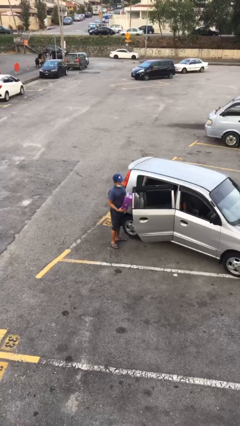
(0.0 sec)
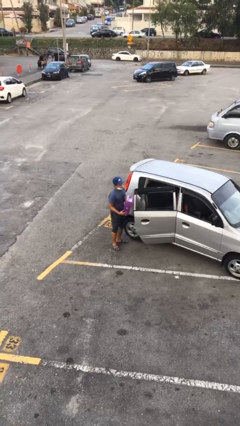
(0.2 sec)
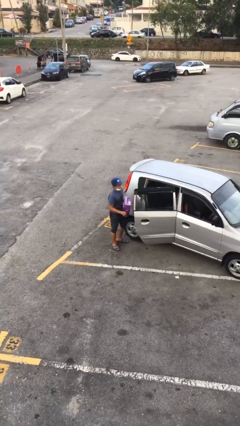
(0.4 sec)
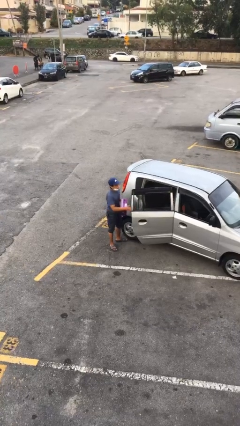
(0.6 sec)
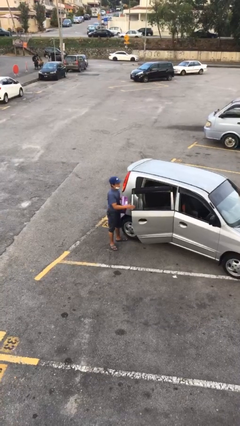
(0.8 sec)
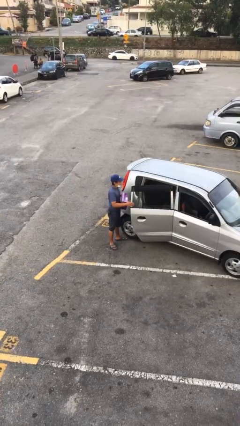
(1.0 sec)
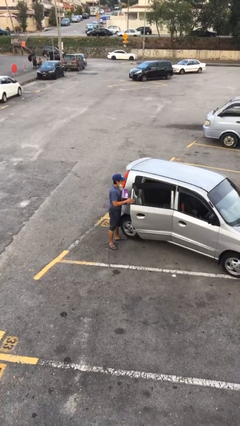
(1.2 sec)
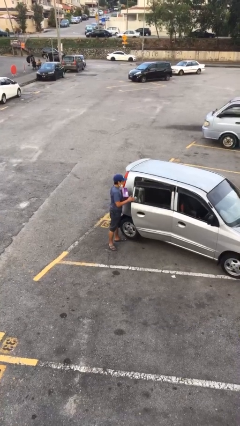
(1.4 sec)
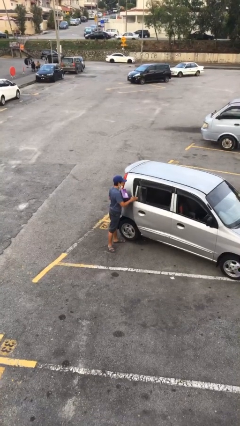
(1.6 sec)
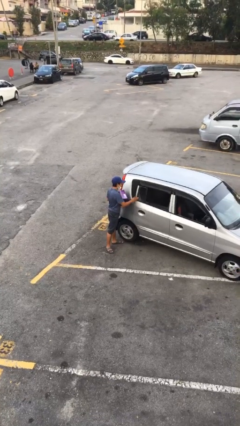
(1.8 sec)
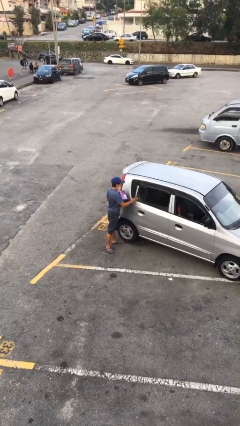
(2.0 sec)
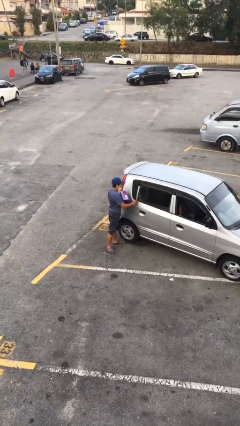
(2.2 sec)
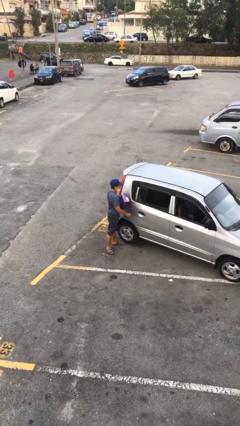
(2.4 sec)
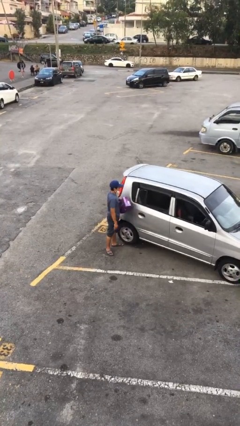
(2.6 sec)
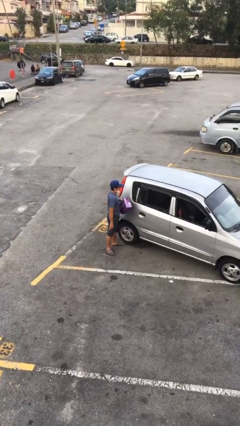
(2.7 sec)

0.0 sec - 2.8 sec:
person closes car door

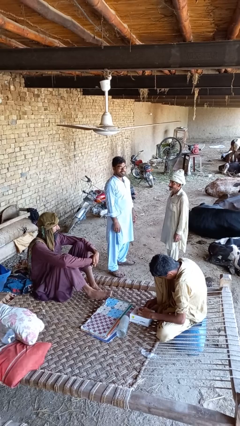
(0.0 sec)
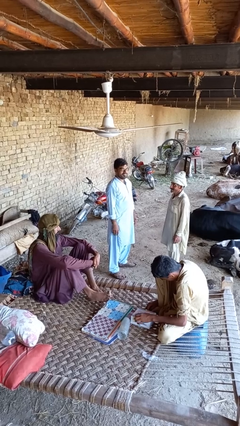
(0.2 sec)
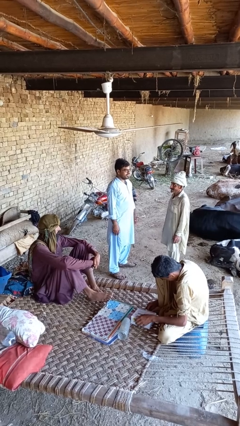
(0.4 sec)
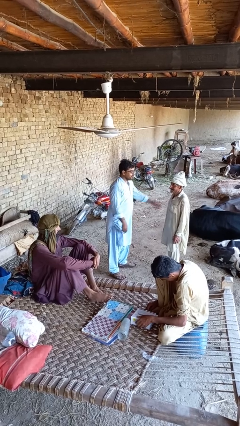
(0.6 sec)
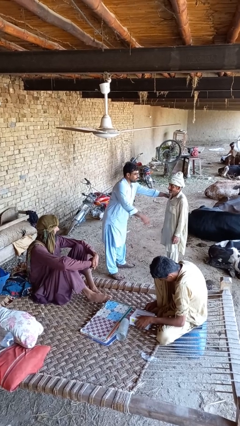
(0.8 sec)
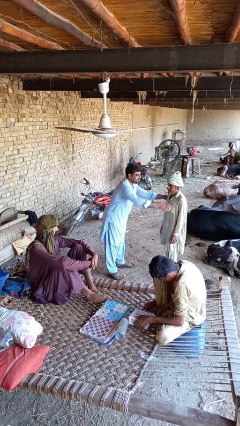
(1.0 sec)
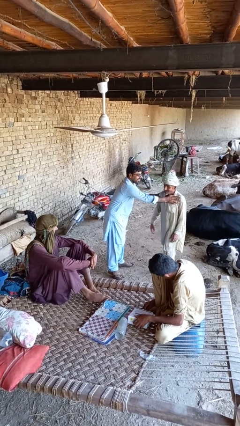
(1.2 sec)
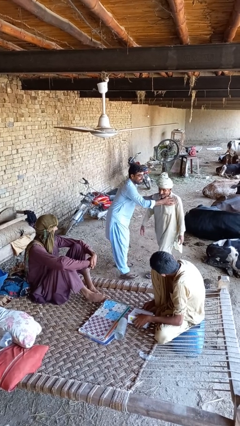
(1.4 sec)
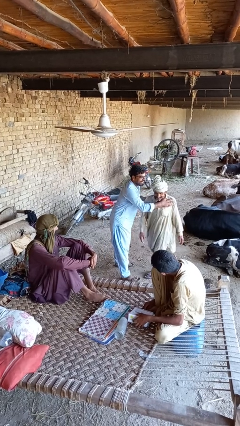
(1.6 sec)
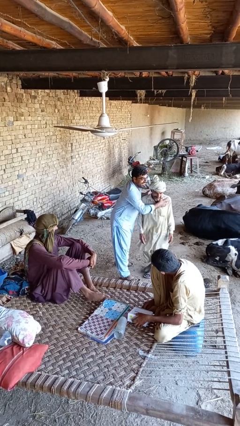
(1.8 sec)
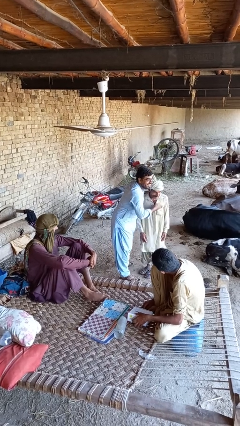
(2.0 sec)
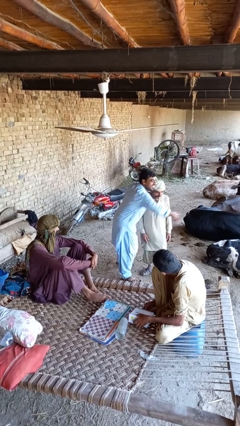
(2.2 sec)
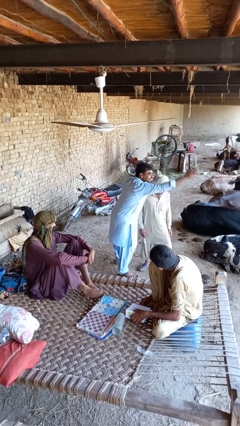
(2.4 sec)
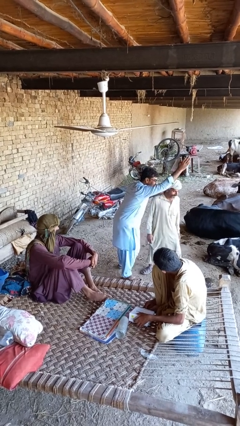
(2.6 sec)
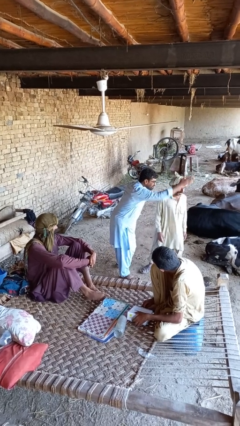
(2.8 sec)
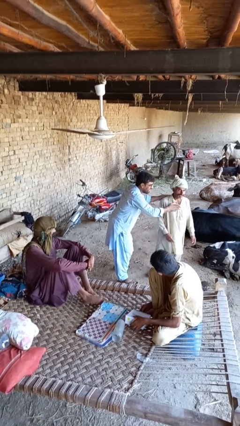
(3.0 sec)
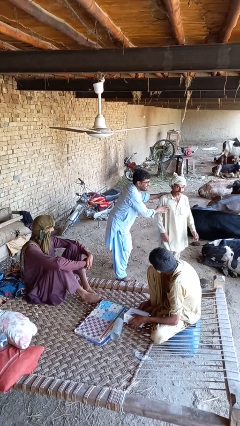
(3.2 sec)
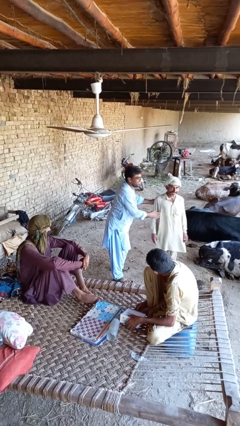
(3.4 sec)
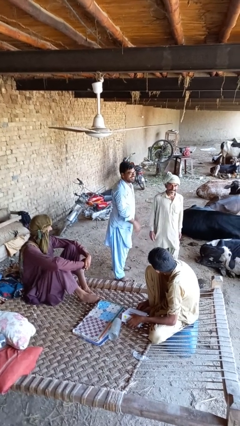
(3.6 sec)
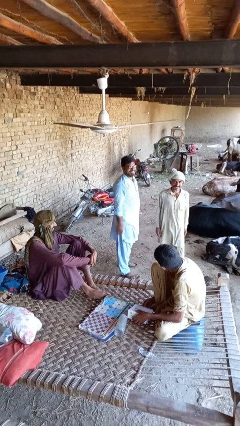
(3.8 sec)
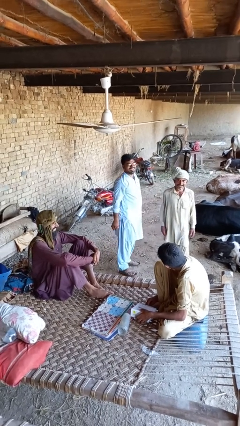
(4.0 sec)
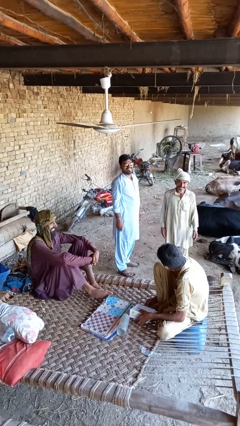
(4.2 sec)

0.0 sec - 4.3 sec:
person shoves person

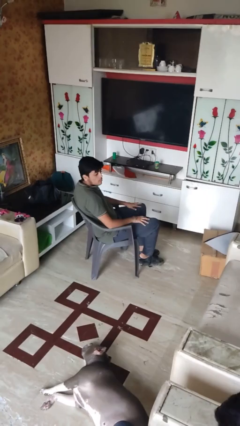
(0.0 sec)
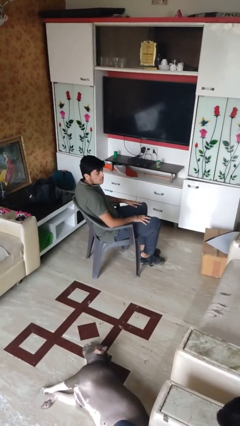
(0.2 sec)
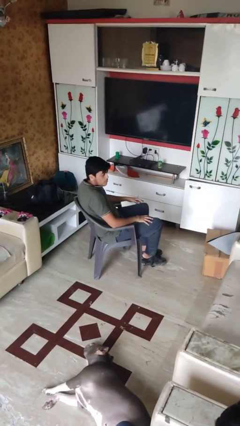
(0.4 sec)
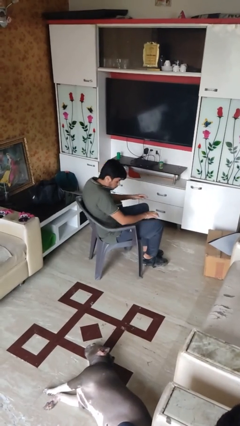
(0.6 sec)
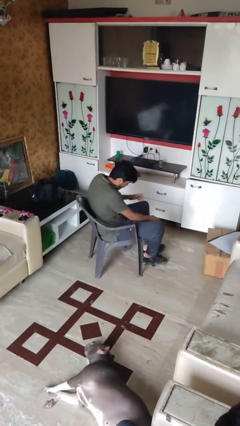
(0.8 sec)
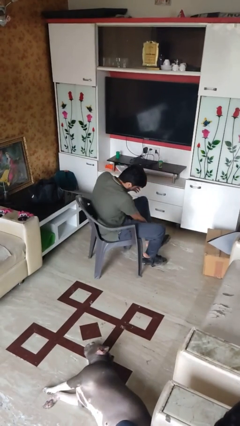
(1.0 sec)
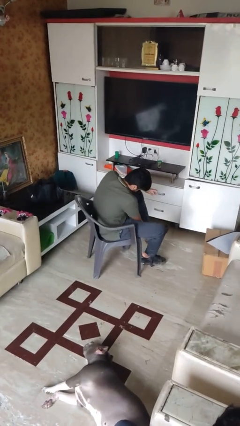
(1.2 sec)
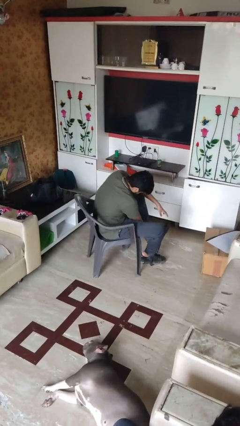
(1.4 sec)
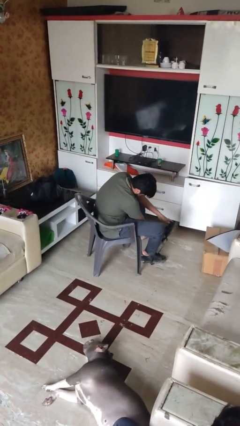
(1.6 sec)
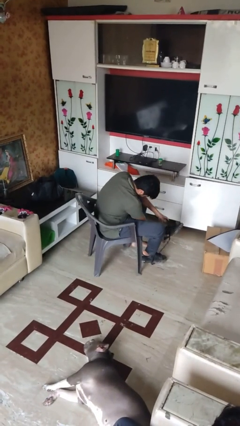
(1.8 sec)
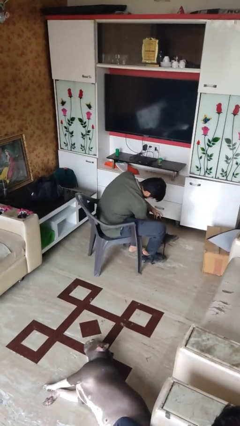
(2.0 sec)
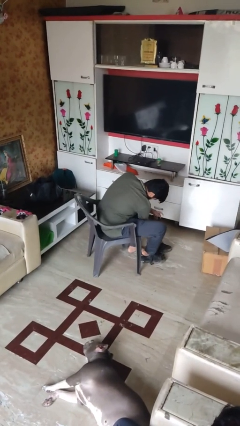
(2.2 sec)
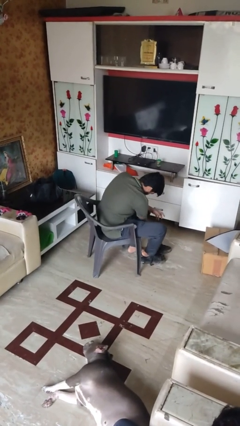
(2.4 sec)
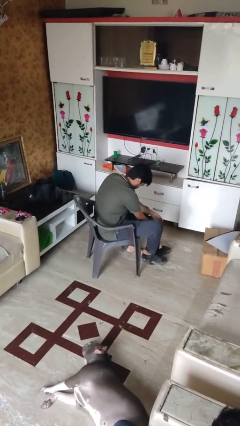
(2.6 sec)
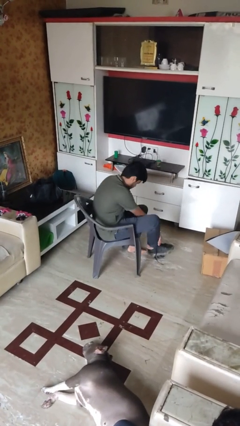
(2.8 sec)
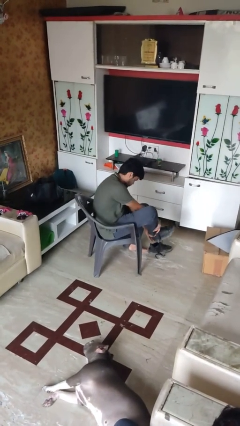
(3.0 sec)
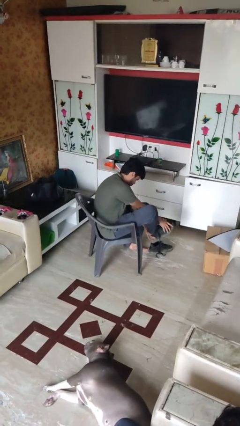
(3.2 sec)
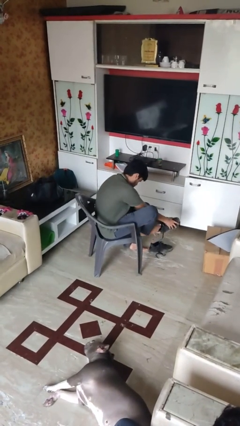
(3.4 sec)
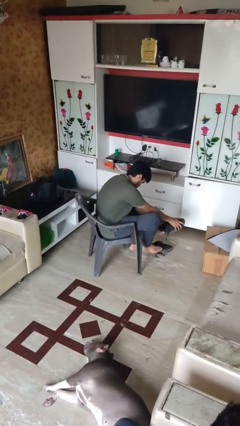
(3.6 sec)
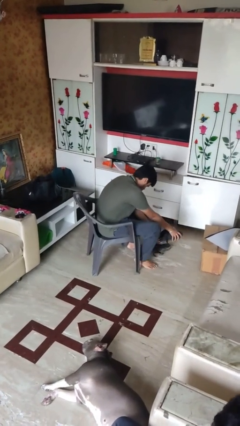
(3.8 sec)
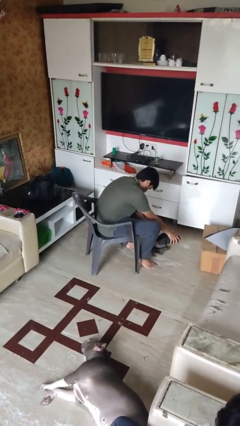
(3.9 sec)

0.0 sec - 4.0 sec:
person takes off shoes

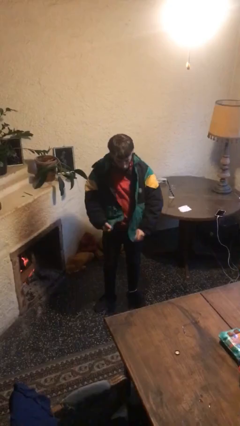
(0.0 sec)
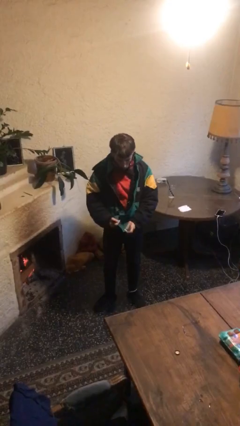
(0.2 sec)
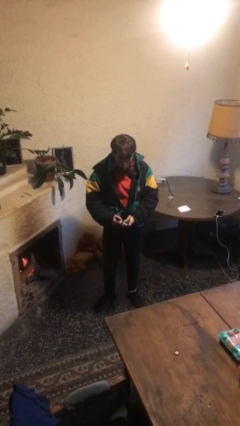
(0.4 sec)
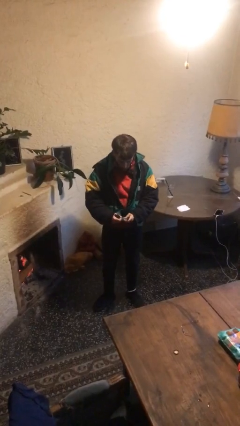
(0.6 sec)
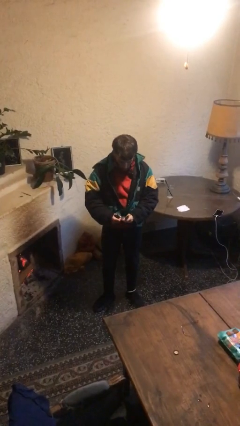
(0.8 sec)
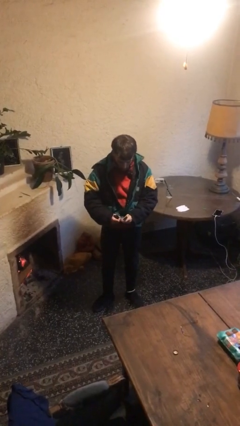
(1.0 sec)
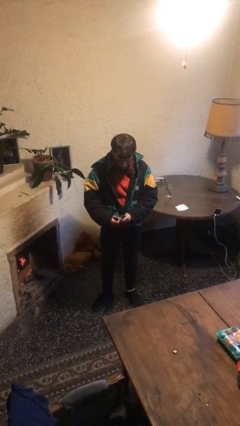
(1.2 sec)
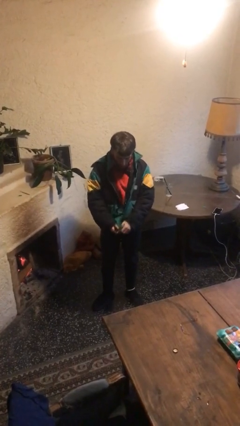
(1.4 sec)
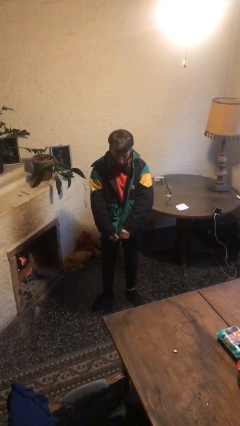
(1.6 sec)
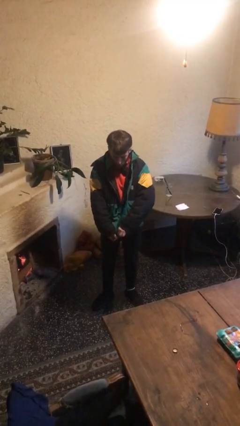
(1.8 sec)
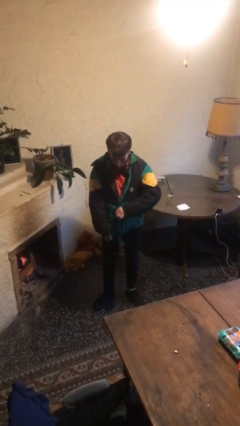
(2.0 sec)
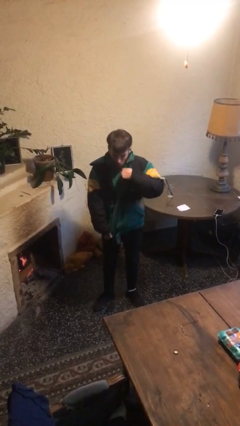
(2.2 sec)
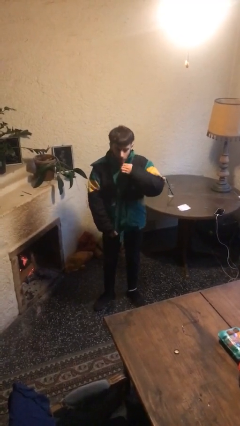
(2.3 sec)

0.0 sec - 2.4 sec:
person zips up jacket

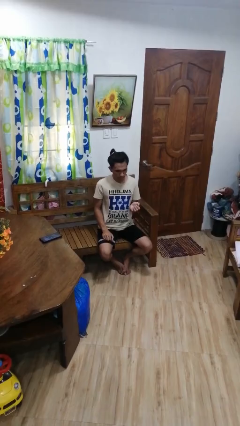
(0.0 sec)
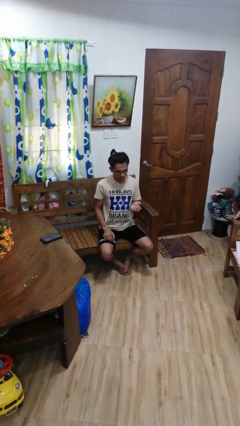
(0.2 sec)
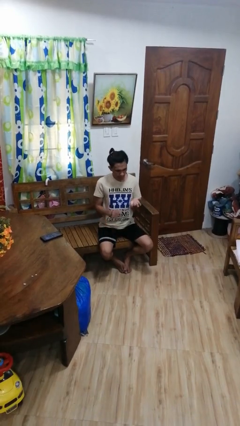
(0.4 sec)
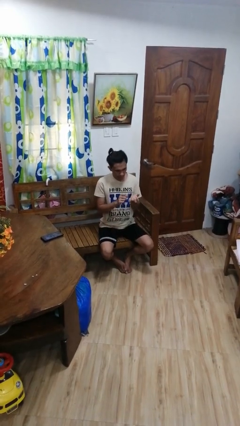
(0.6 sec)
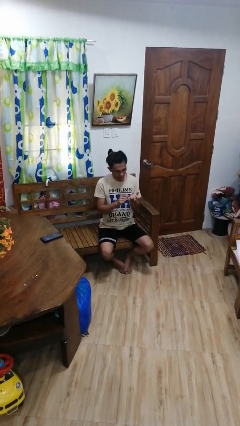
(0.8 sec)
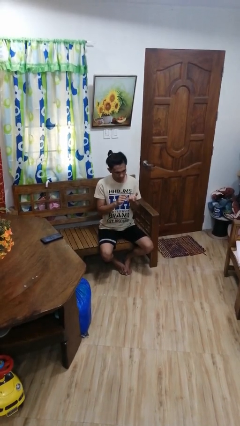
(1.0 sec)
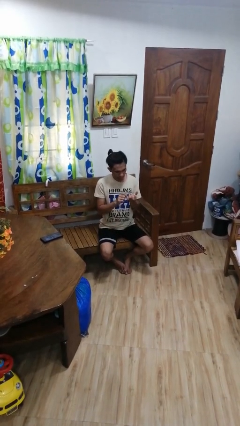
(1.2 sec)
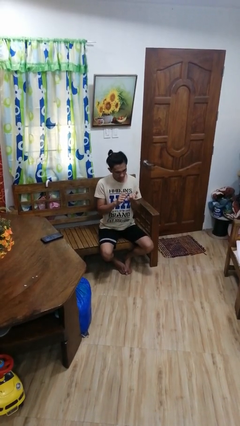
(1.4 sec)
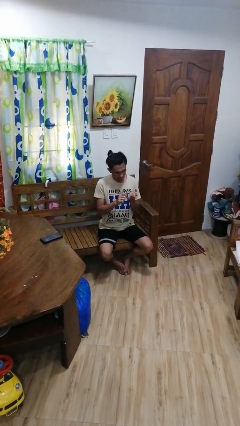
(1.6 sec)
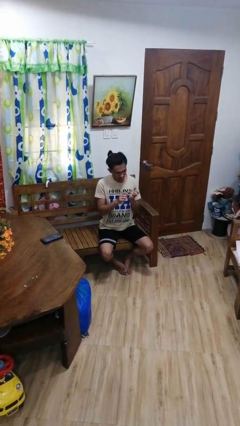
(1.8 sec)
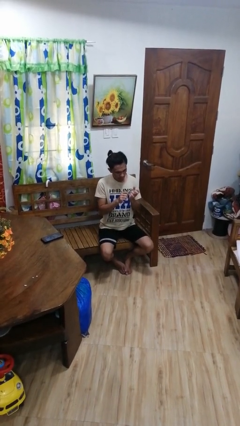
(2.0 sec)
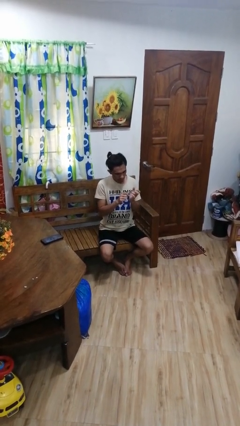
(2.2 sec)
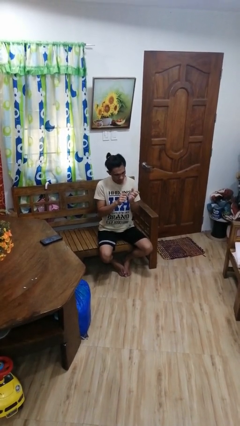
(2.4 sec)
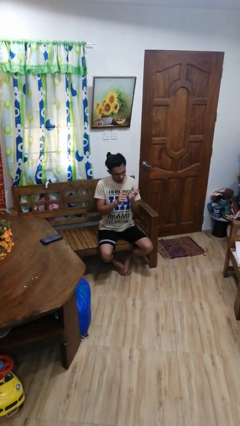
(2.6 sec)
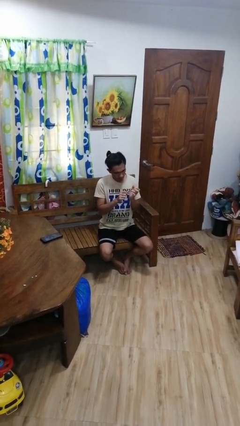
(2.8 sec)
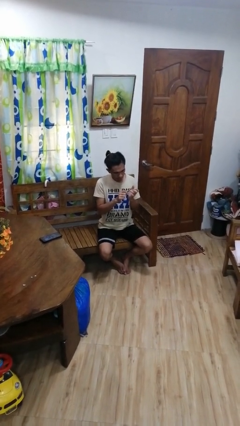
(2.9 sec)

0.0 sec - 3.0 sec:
person files fingernails

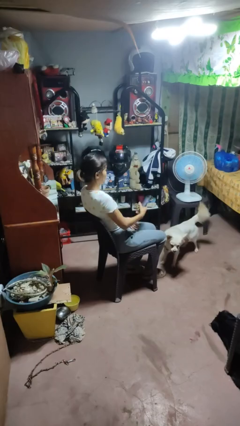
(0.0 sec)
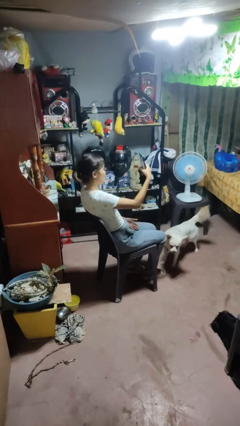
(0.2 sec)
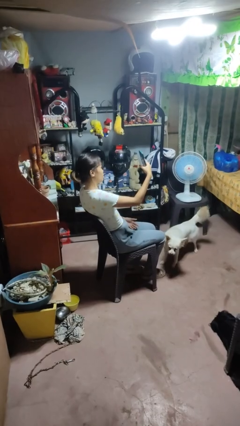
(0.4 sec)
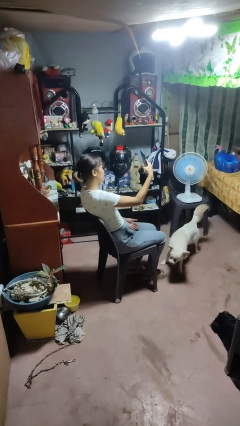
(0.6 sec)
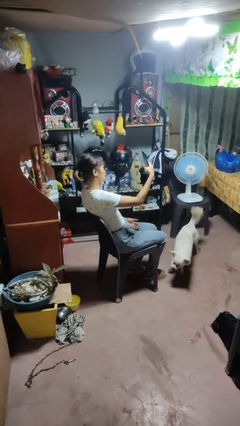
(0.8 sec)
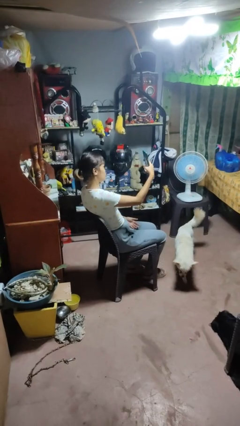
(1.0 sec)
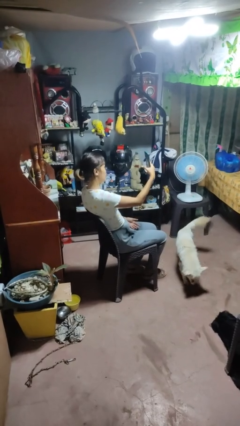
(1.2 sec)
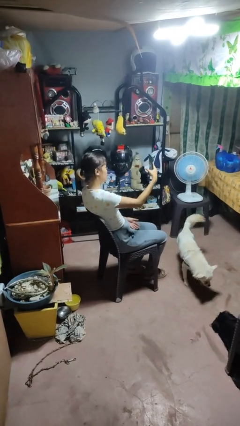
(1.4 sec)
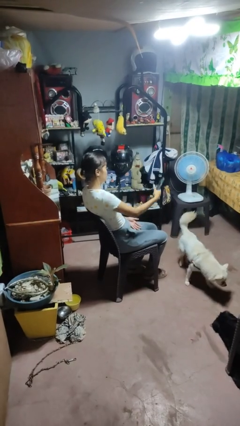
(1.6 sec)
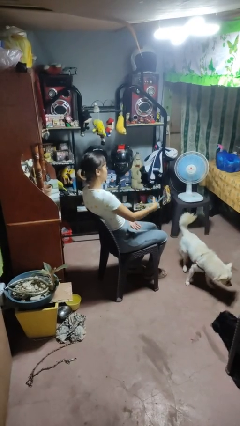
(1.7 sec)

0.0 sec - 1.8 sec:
person takes selfie
